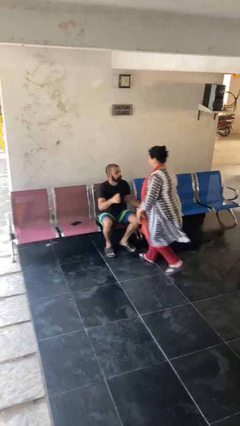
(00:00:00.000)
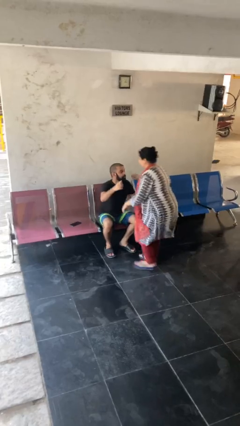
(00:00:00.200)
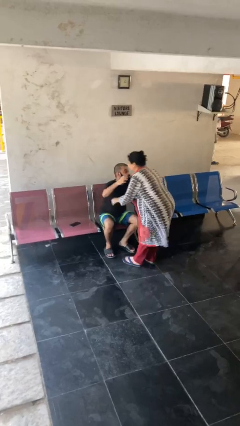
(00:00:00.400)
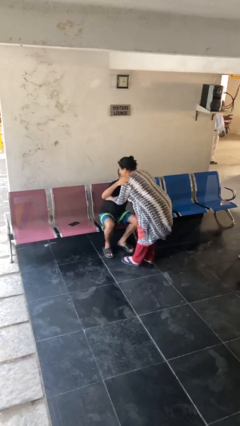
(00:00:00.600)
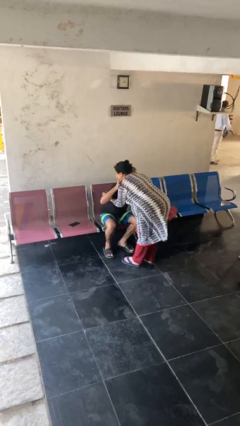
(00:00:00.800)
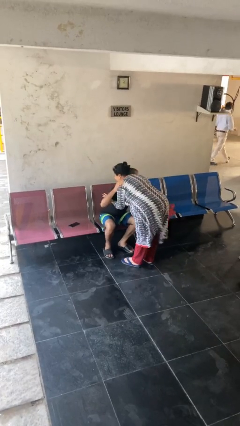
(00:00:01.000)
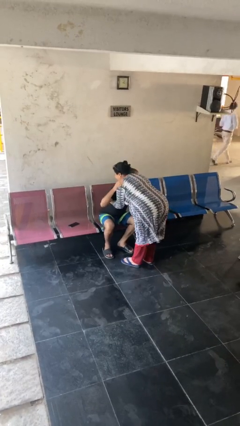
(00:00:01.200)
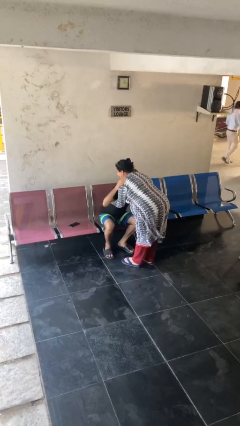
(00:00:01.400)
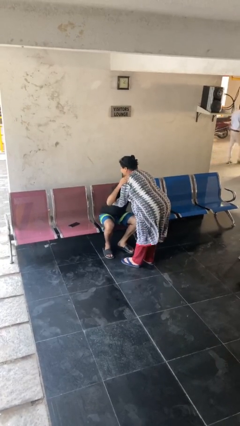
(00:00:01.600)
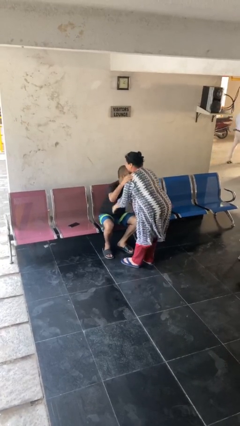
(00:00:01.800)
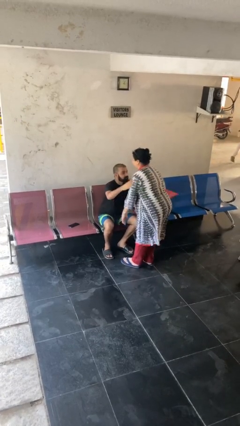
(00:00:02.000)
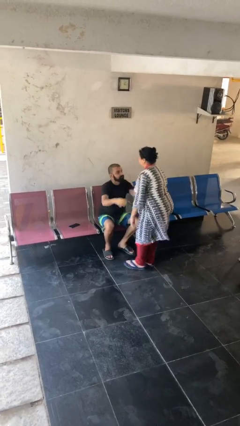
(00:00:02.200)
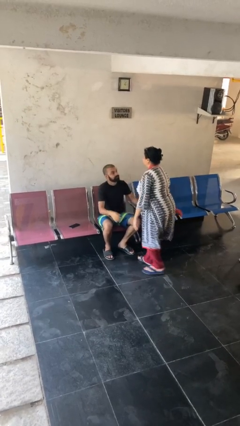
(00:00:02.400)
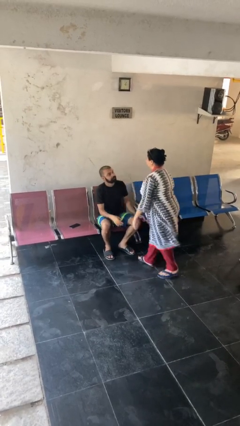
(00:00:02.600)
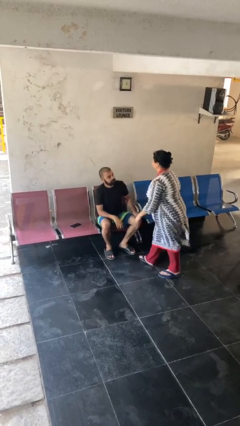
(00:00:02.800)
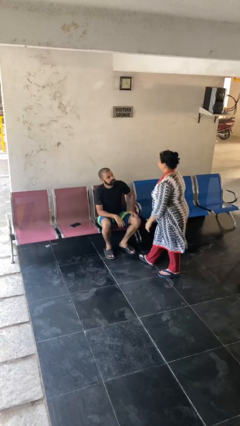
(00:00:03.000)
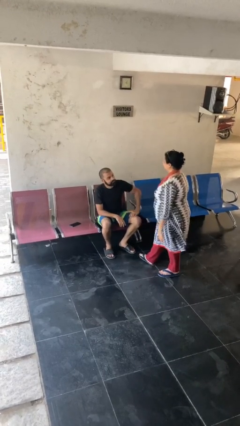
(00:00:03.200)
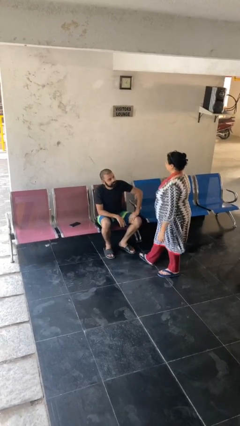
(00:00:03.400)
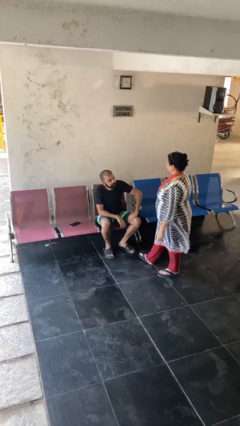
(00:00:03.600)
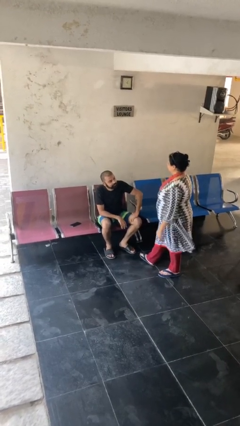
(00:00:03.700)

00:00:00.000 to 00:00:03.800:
person embraces person

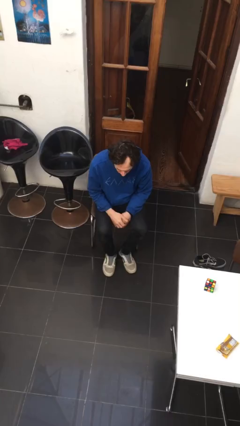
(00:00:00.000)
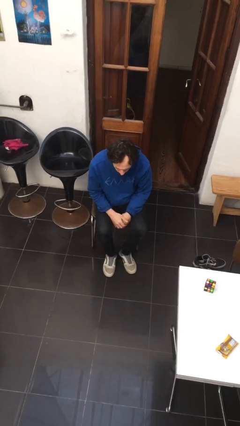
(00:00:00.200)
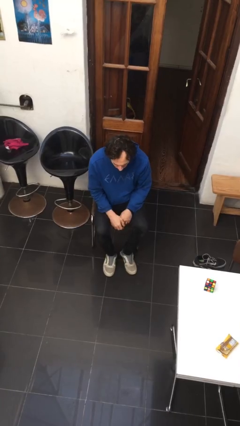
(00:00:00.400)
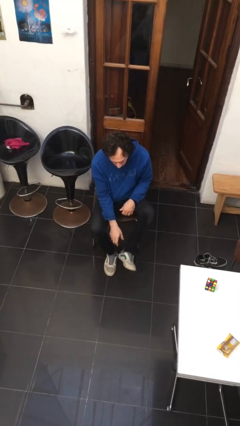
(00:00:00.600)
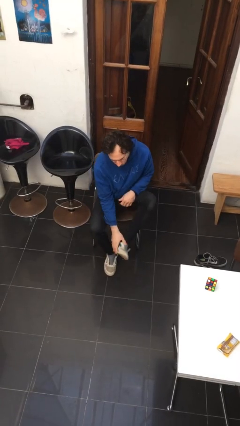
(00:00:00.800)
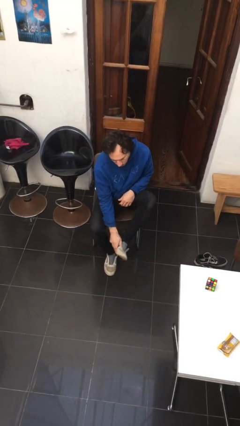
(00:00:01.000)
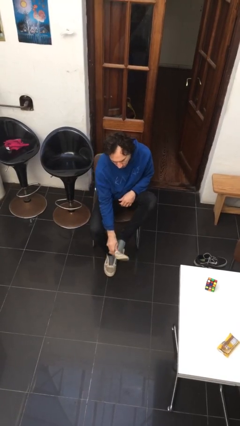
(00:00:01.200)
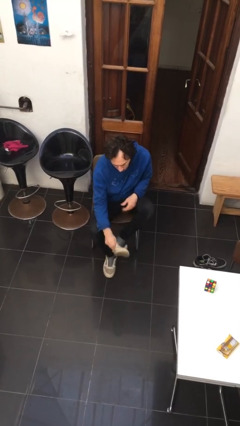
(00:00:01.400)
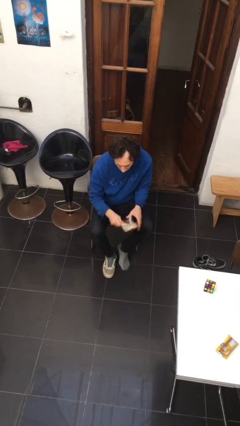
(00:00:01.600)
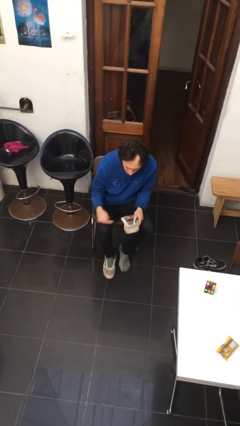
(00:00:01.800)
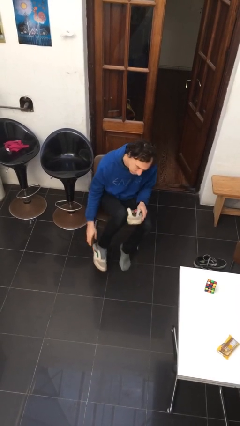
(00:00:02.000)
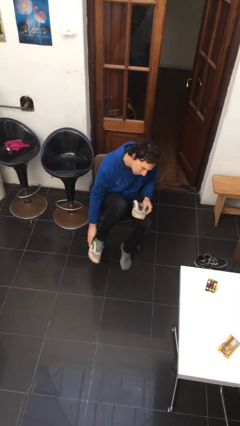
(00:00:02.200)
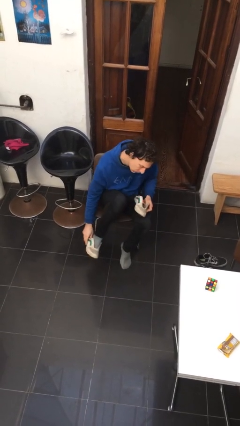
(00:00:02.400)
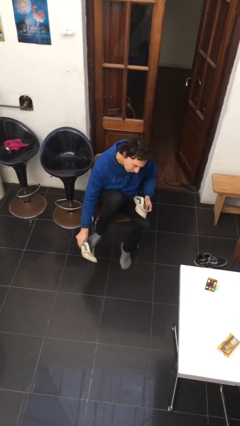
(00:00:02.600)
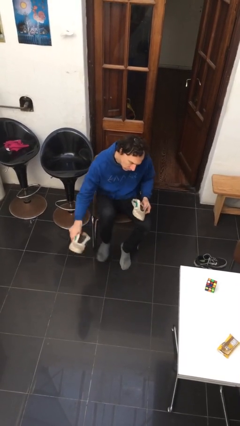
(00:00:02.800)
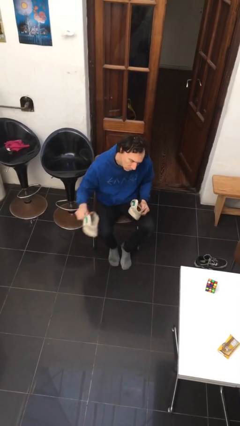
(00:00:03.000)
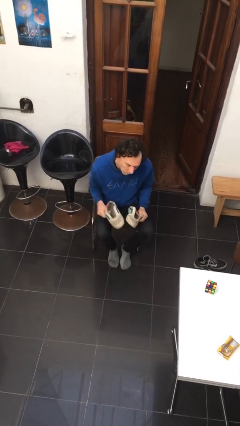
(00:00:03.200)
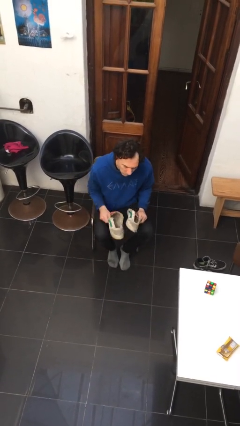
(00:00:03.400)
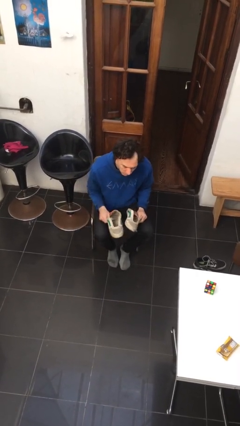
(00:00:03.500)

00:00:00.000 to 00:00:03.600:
person takes off shoes

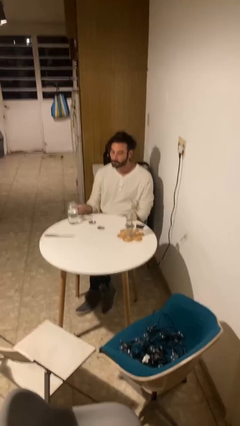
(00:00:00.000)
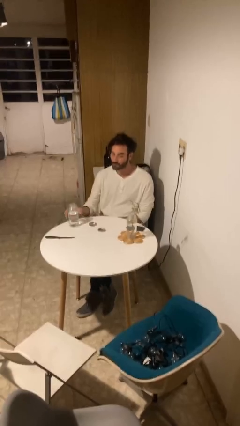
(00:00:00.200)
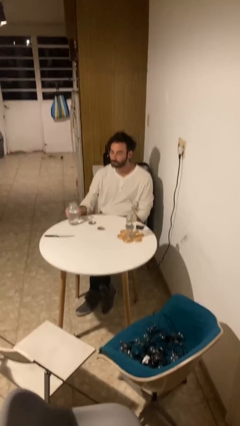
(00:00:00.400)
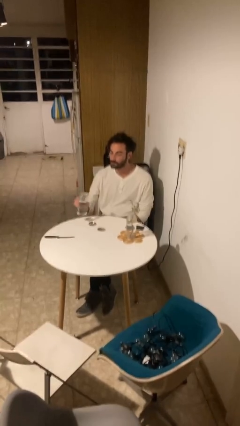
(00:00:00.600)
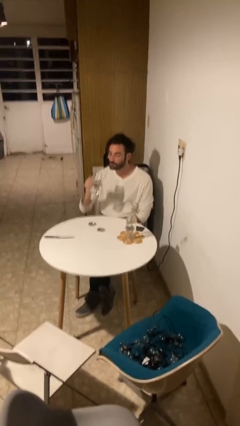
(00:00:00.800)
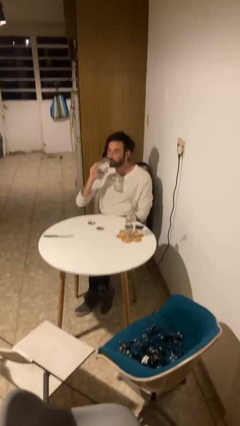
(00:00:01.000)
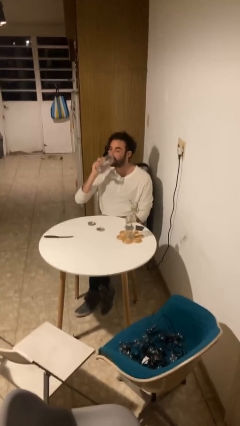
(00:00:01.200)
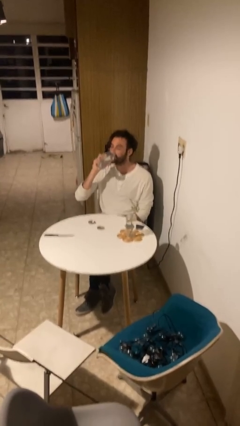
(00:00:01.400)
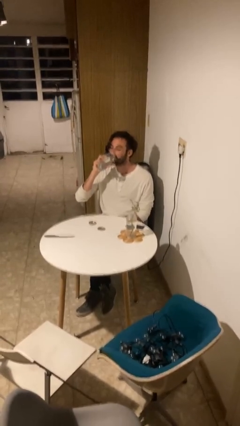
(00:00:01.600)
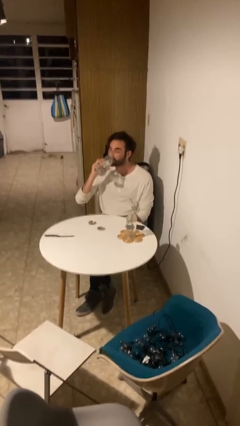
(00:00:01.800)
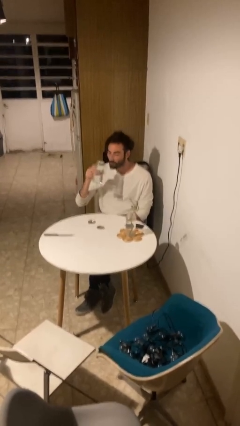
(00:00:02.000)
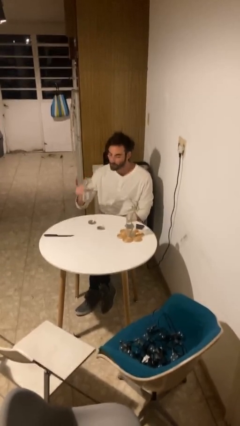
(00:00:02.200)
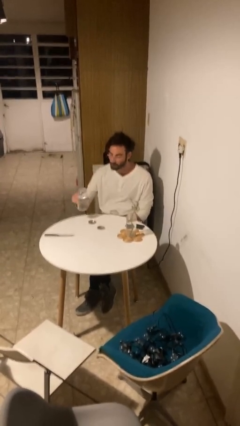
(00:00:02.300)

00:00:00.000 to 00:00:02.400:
person drinks from cup

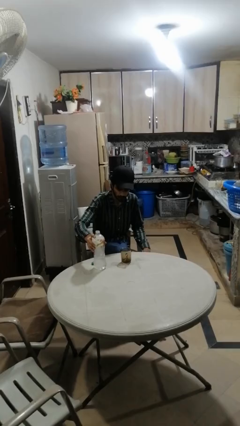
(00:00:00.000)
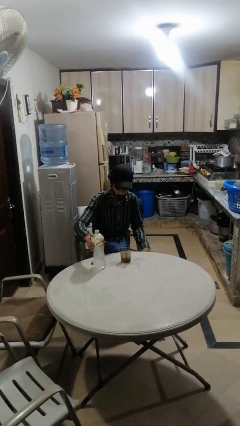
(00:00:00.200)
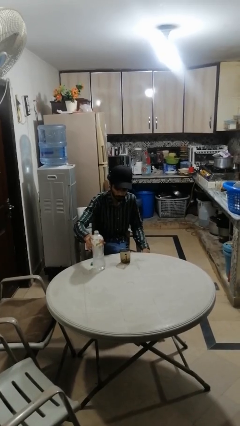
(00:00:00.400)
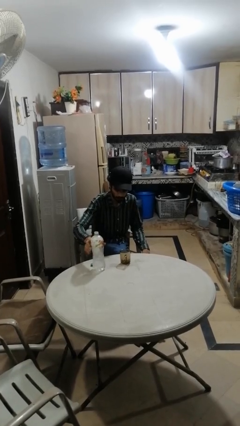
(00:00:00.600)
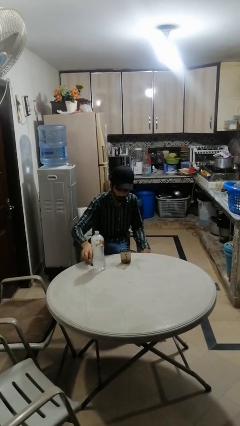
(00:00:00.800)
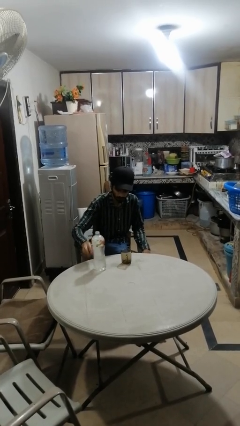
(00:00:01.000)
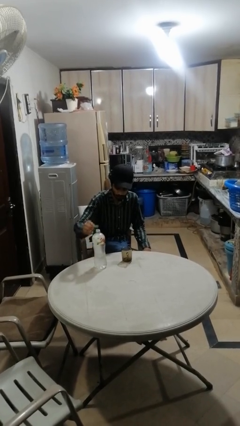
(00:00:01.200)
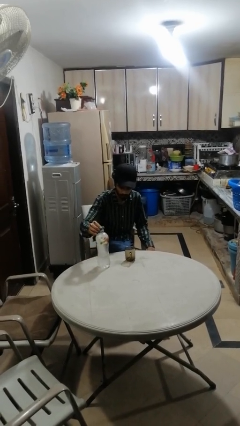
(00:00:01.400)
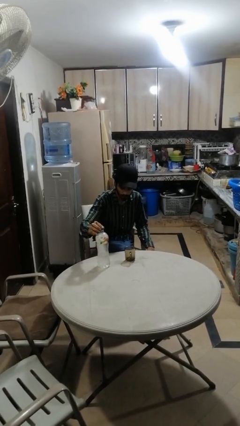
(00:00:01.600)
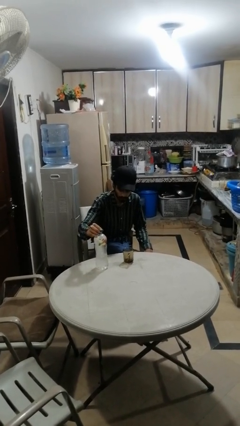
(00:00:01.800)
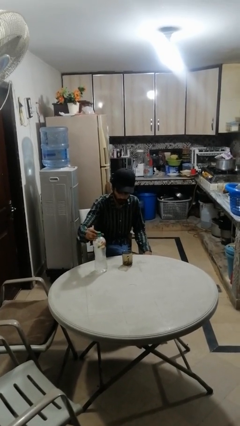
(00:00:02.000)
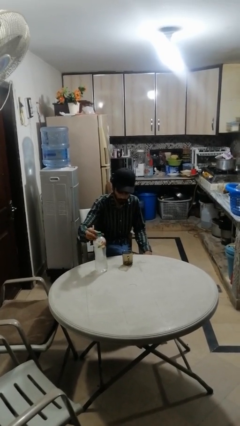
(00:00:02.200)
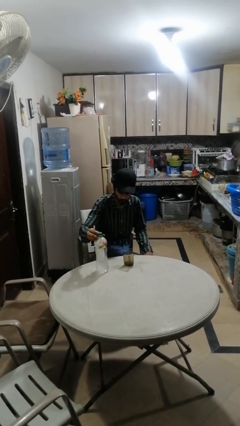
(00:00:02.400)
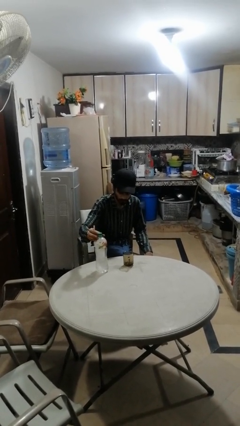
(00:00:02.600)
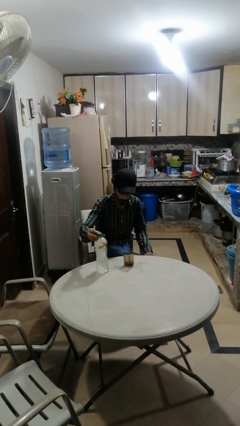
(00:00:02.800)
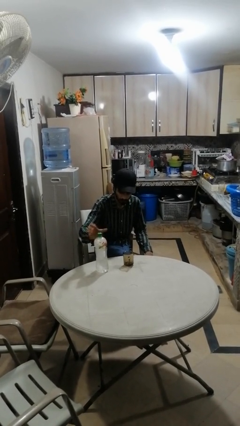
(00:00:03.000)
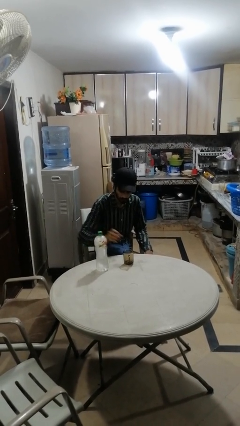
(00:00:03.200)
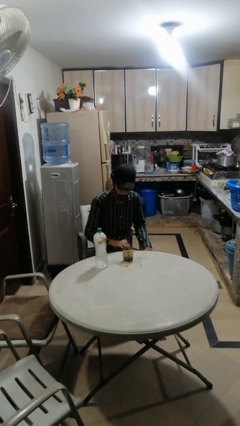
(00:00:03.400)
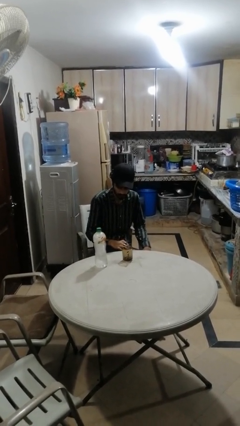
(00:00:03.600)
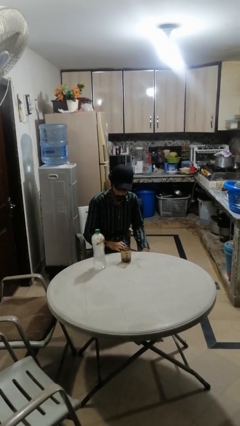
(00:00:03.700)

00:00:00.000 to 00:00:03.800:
person screws lid to bottle

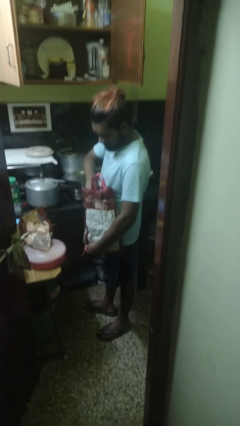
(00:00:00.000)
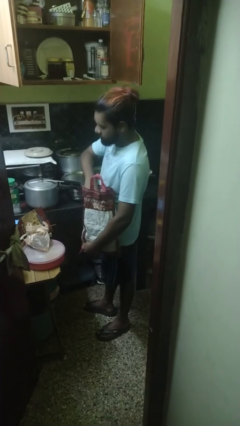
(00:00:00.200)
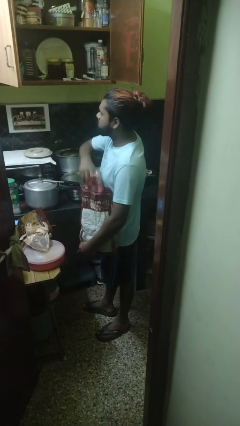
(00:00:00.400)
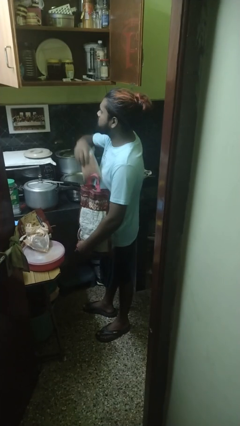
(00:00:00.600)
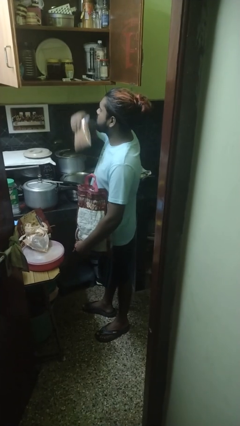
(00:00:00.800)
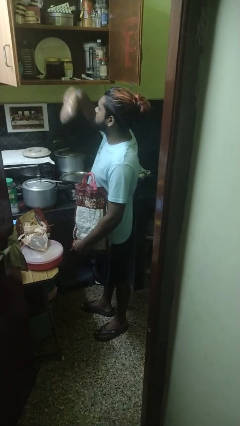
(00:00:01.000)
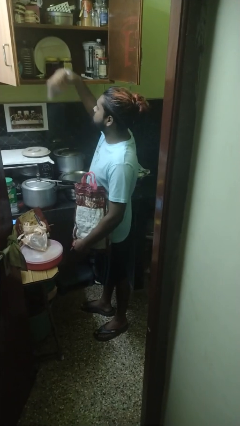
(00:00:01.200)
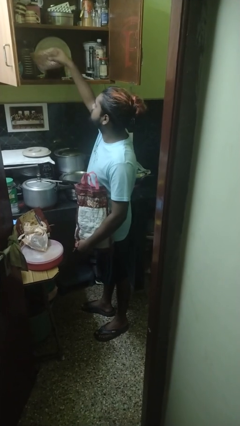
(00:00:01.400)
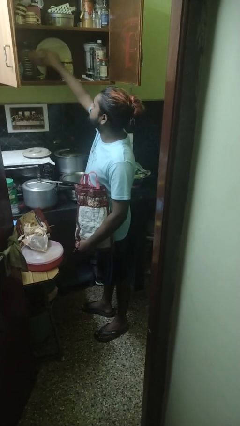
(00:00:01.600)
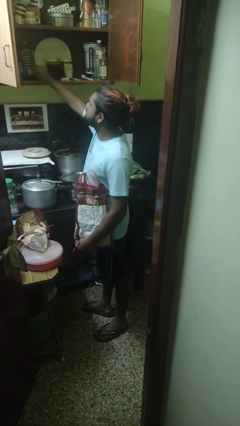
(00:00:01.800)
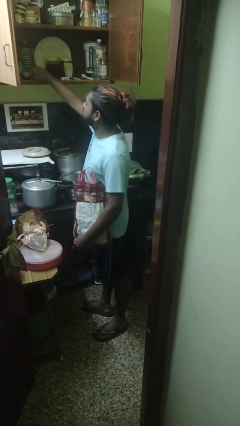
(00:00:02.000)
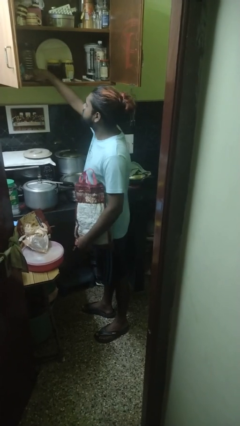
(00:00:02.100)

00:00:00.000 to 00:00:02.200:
person loads groceries into cabinet

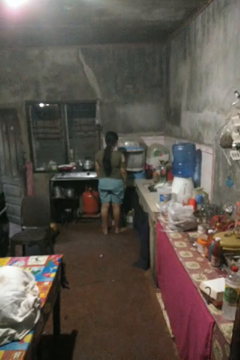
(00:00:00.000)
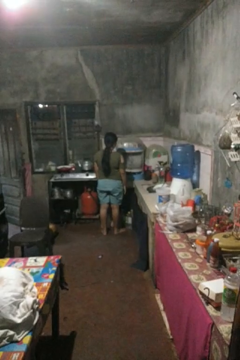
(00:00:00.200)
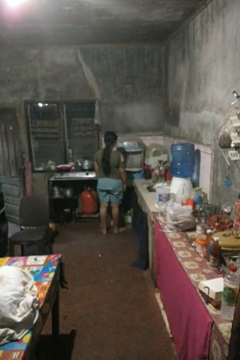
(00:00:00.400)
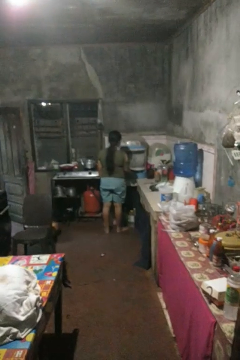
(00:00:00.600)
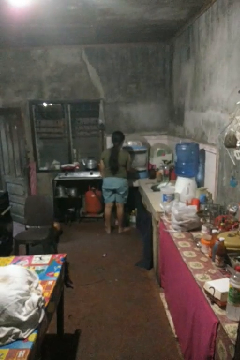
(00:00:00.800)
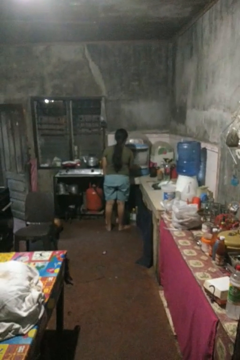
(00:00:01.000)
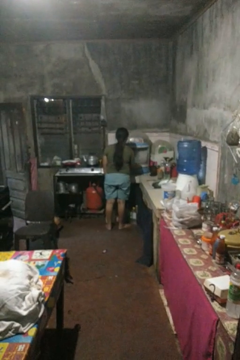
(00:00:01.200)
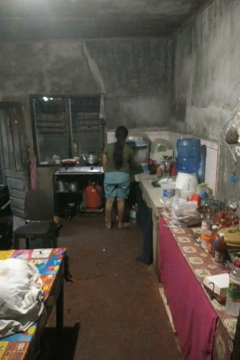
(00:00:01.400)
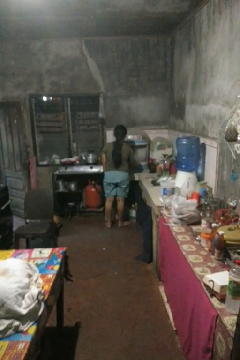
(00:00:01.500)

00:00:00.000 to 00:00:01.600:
person closes kitchen drawer
